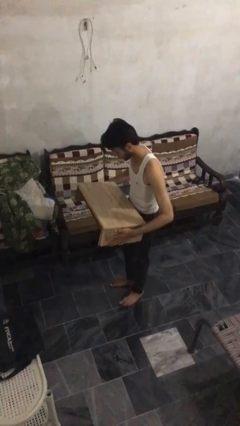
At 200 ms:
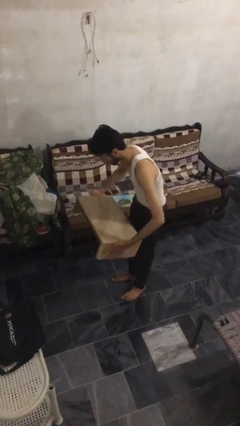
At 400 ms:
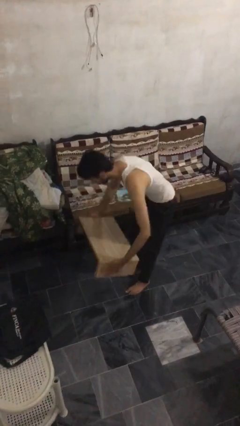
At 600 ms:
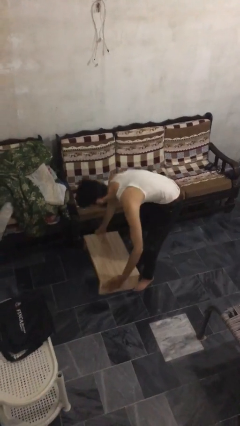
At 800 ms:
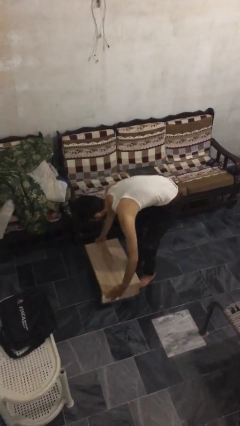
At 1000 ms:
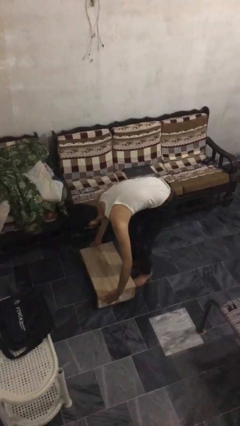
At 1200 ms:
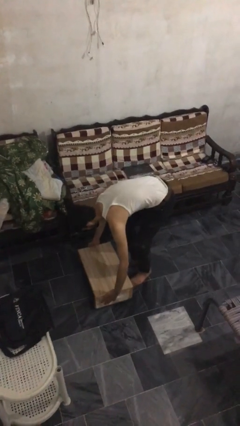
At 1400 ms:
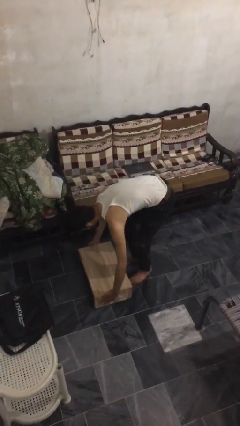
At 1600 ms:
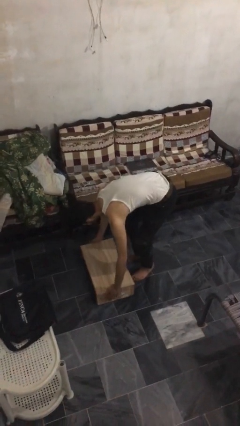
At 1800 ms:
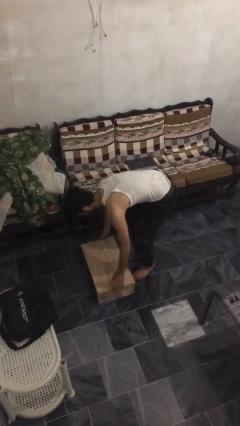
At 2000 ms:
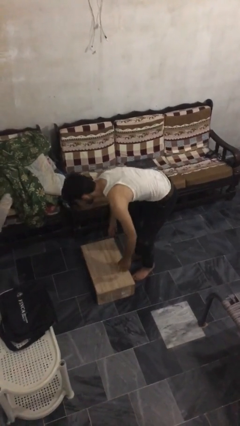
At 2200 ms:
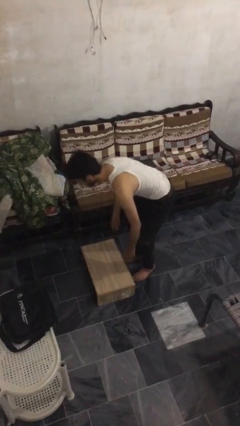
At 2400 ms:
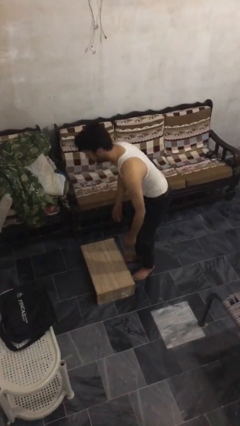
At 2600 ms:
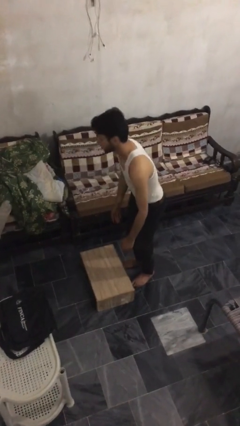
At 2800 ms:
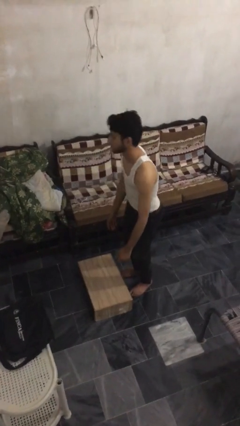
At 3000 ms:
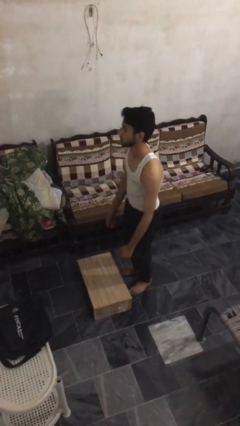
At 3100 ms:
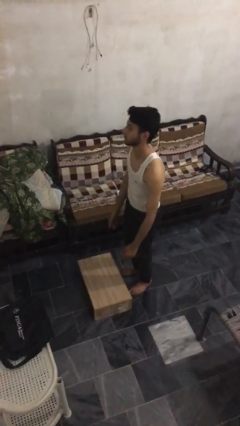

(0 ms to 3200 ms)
person puts down object on floor

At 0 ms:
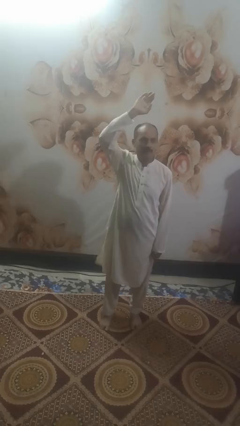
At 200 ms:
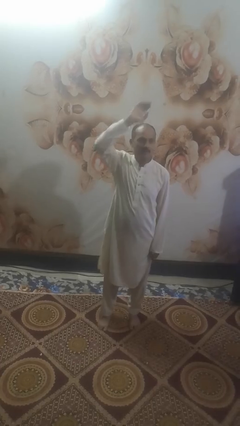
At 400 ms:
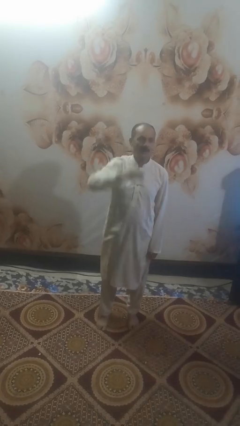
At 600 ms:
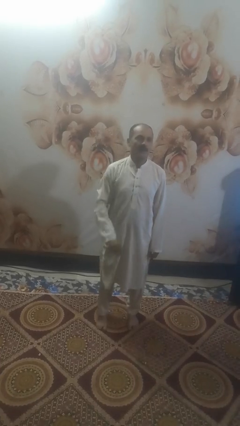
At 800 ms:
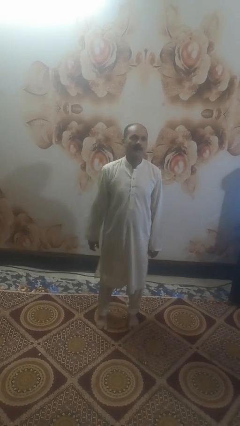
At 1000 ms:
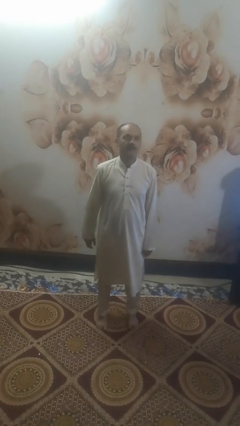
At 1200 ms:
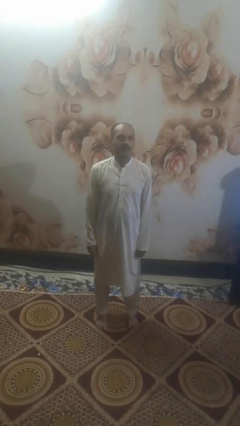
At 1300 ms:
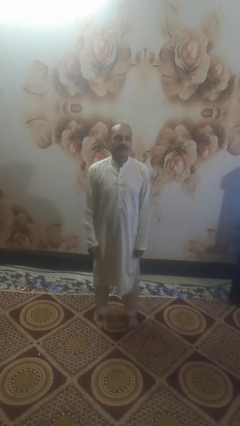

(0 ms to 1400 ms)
person gestures lower hand

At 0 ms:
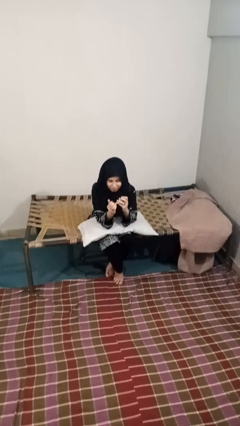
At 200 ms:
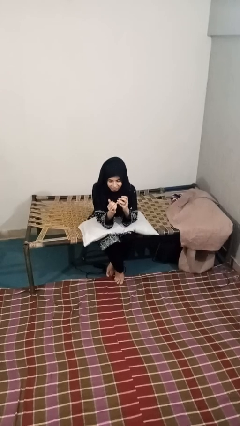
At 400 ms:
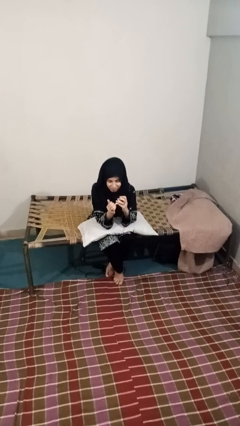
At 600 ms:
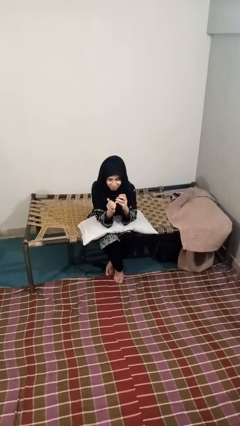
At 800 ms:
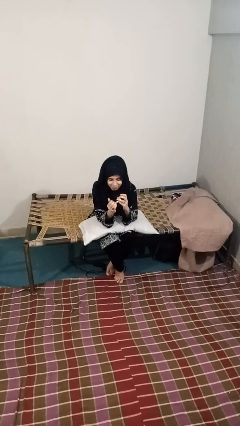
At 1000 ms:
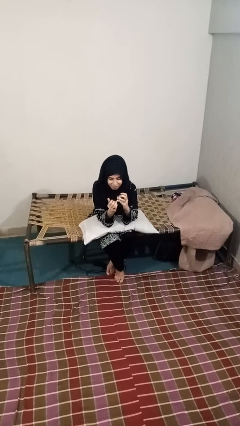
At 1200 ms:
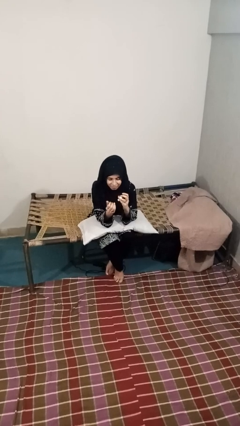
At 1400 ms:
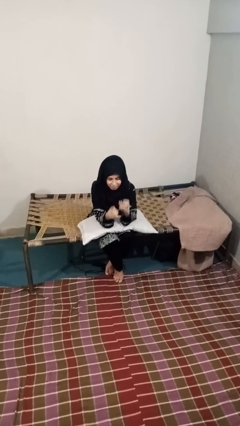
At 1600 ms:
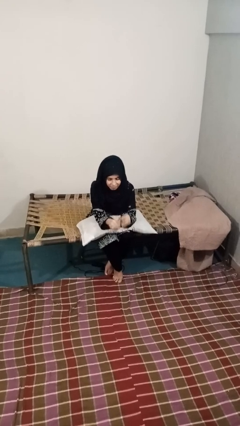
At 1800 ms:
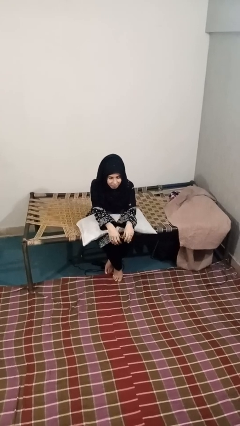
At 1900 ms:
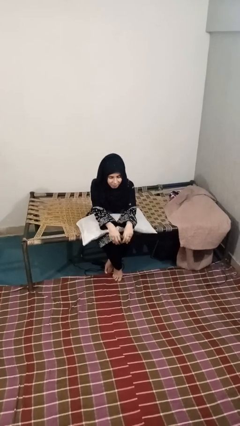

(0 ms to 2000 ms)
person clips fingernails

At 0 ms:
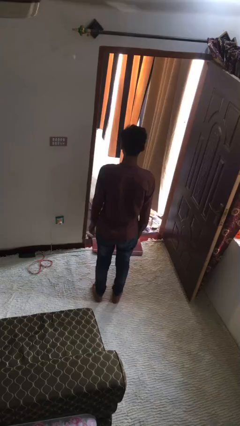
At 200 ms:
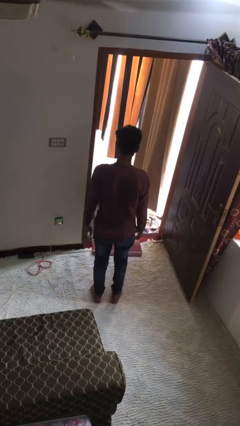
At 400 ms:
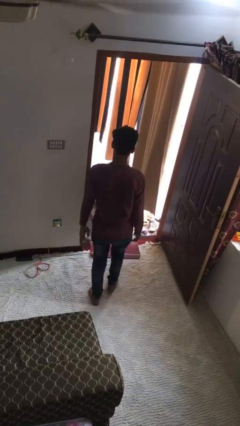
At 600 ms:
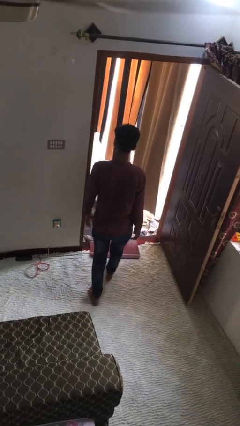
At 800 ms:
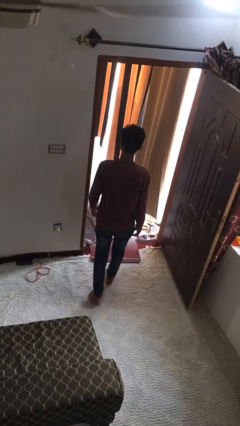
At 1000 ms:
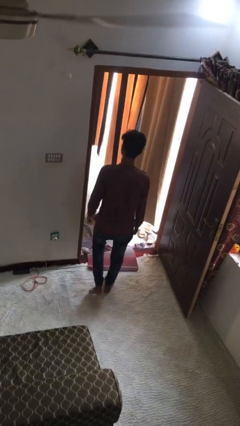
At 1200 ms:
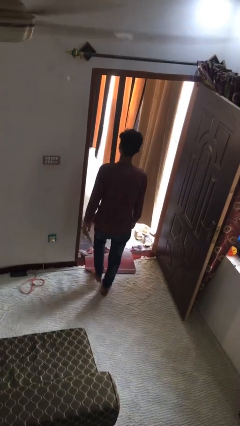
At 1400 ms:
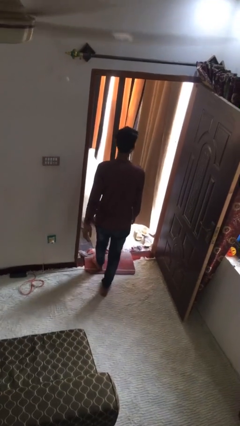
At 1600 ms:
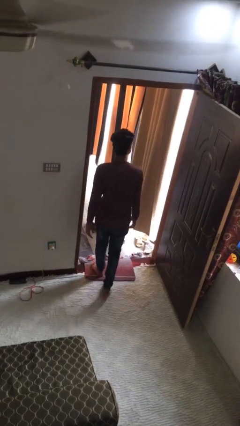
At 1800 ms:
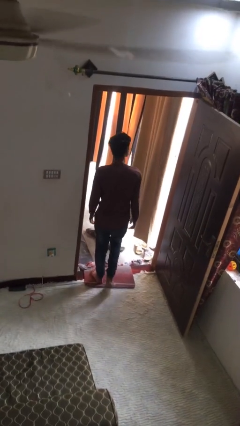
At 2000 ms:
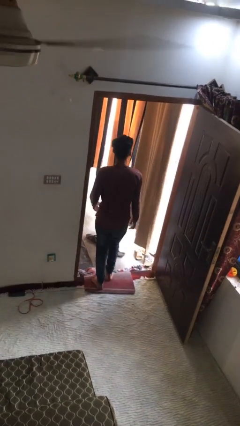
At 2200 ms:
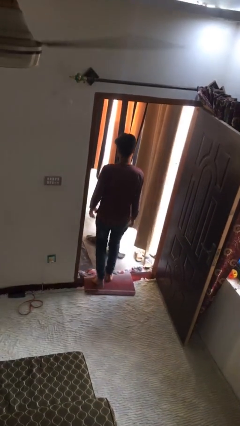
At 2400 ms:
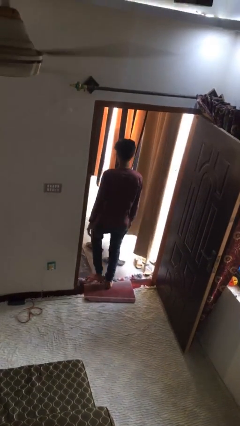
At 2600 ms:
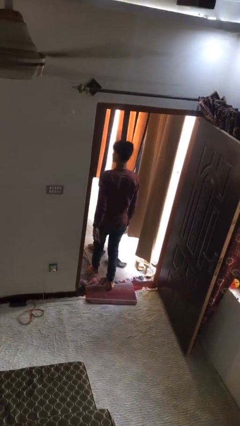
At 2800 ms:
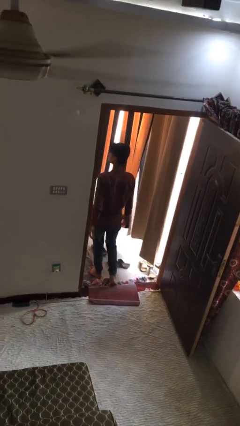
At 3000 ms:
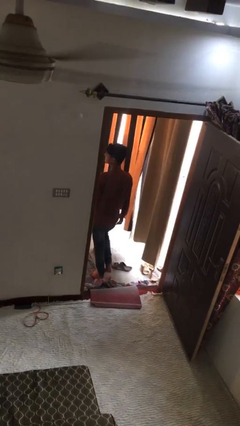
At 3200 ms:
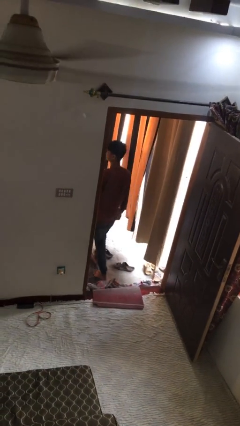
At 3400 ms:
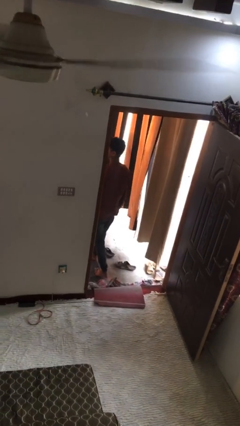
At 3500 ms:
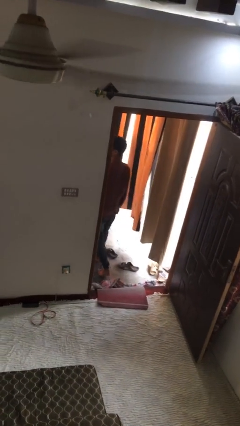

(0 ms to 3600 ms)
person exits scene through structure

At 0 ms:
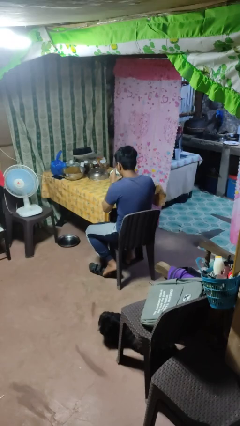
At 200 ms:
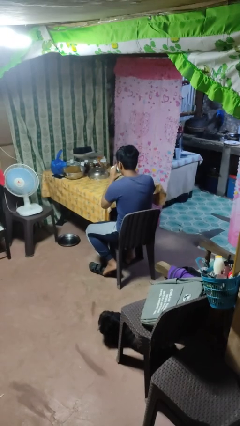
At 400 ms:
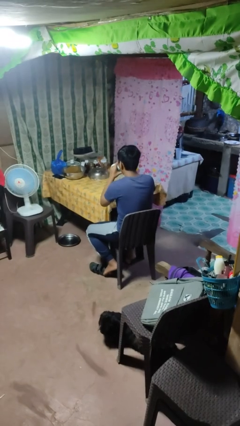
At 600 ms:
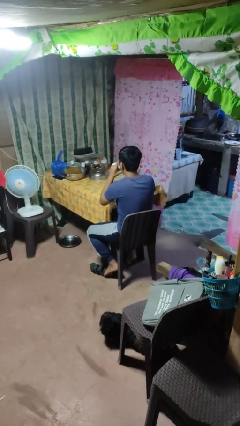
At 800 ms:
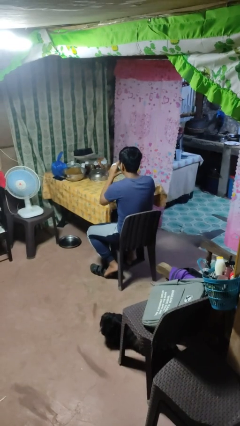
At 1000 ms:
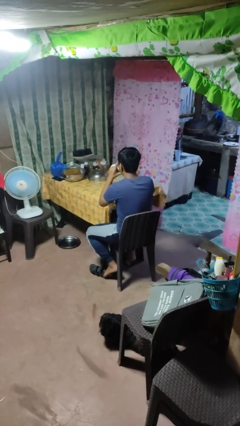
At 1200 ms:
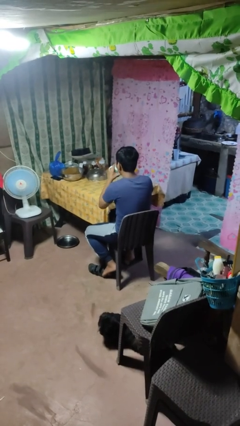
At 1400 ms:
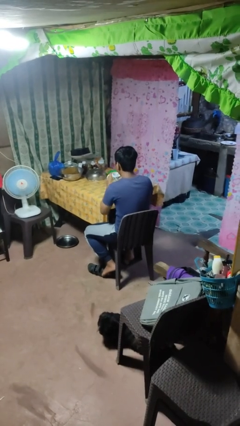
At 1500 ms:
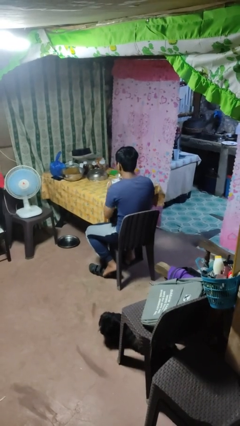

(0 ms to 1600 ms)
person drinks from mug

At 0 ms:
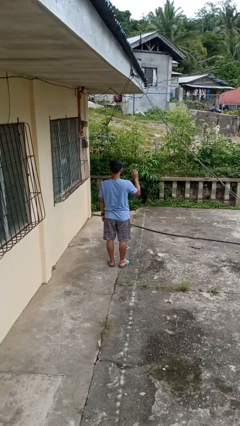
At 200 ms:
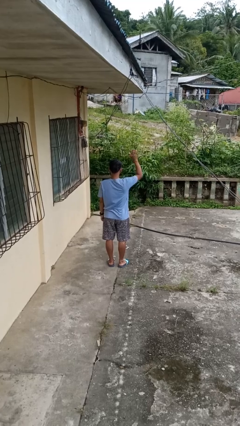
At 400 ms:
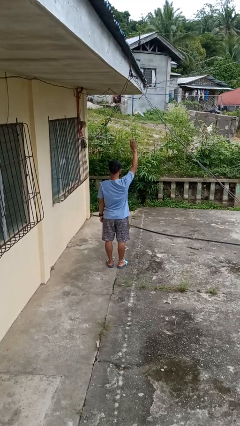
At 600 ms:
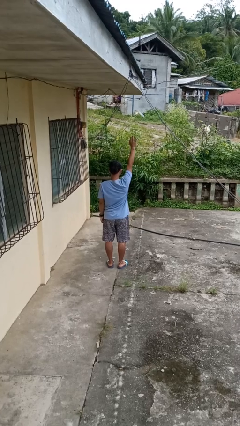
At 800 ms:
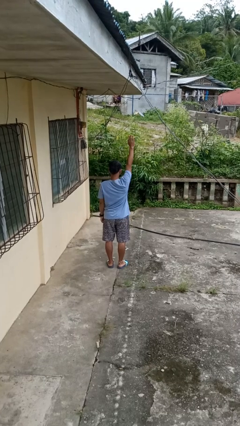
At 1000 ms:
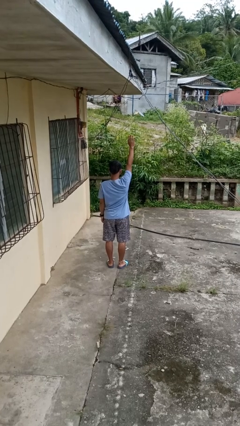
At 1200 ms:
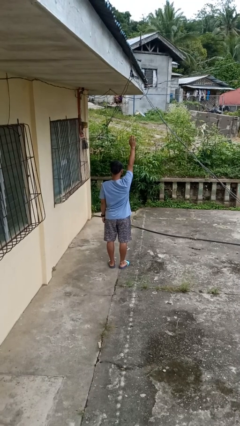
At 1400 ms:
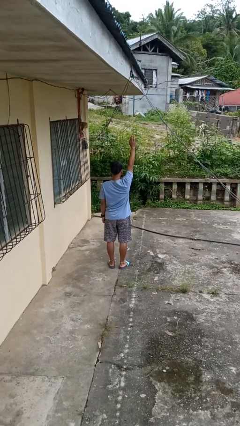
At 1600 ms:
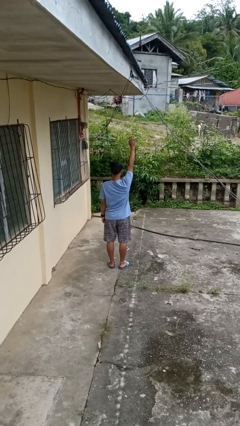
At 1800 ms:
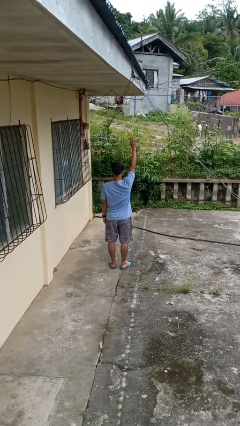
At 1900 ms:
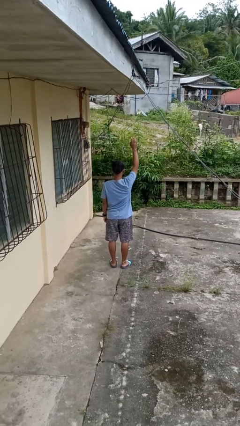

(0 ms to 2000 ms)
person gestures raise hand

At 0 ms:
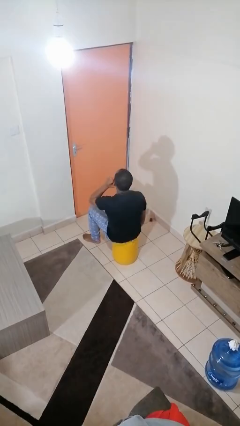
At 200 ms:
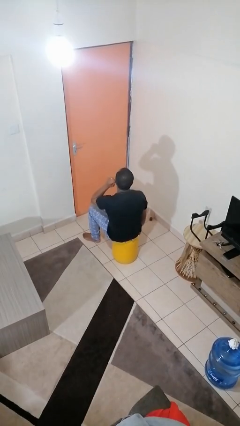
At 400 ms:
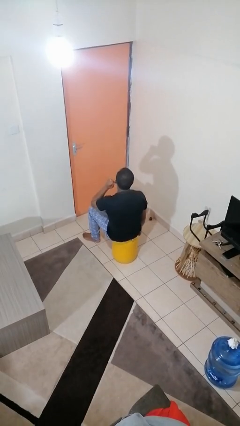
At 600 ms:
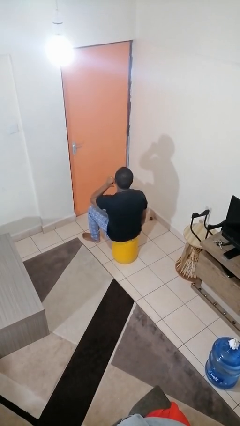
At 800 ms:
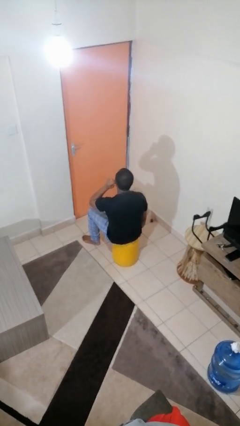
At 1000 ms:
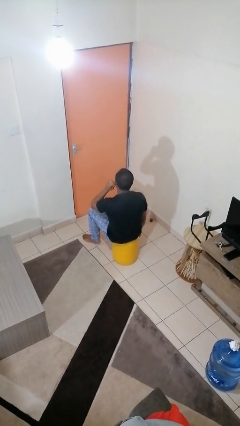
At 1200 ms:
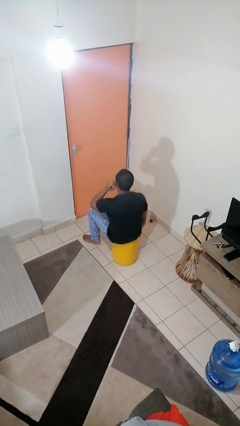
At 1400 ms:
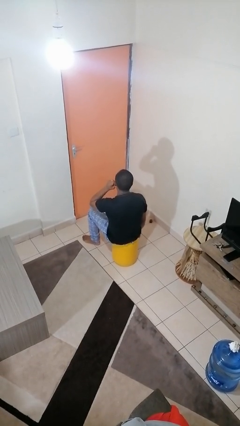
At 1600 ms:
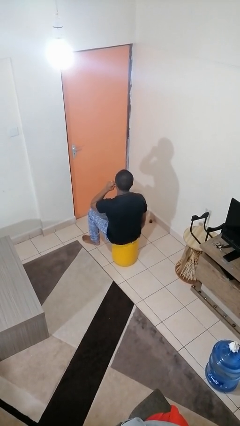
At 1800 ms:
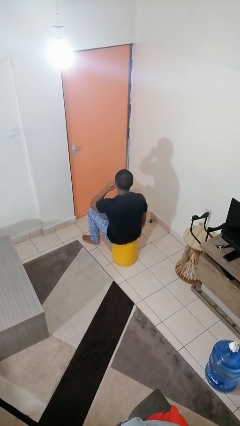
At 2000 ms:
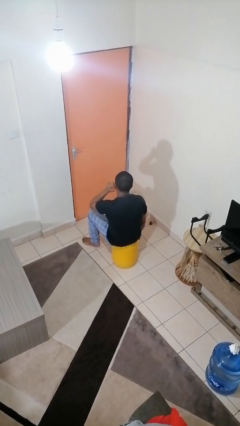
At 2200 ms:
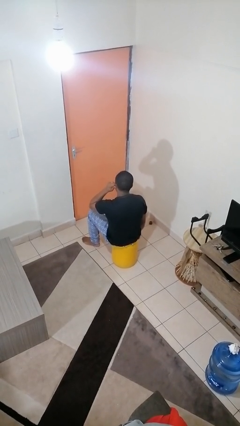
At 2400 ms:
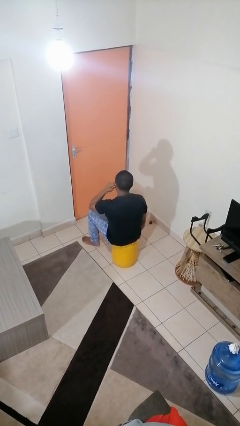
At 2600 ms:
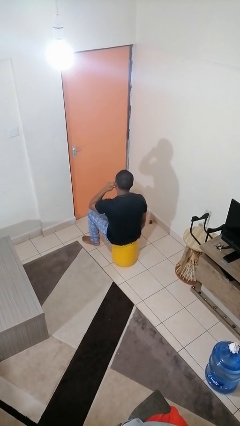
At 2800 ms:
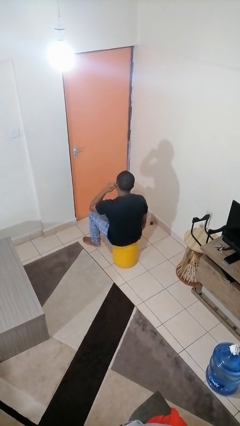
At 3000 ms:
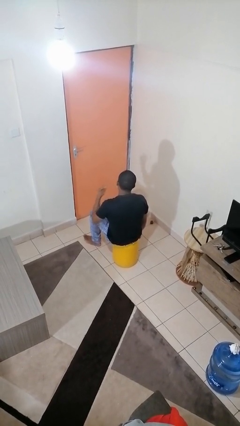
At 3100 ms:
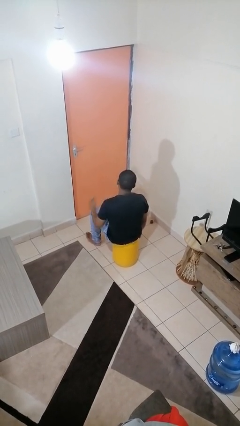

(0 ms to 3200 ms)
person touches earlobe

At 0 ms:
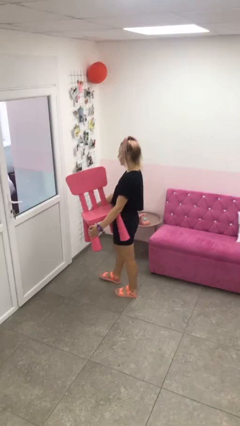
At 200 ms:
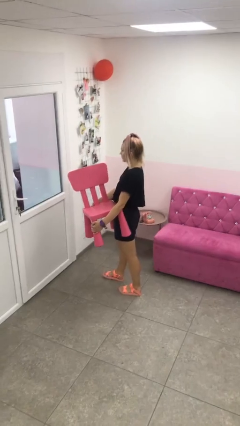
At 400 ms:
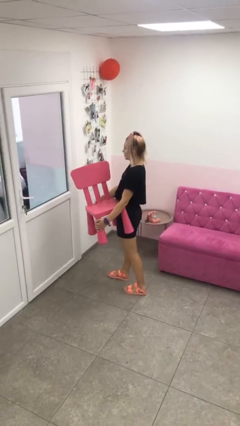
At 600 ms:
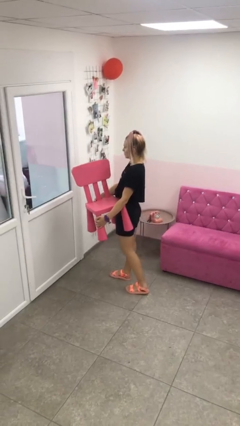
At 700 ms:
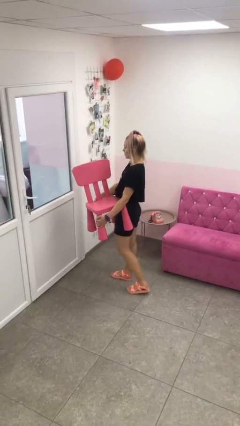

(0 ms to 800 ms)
person carries furniture
